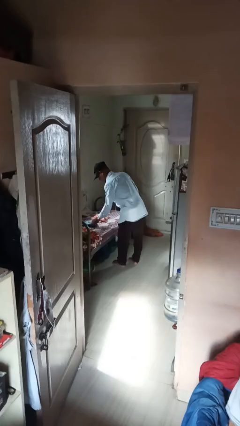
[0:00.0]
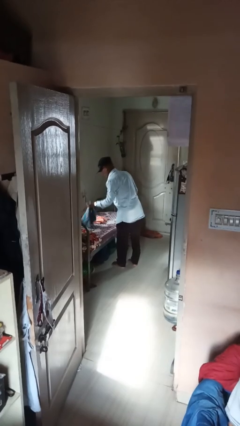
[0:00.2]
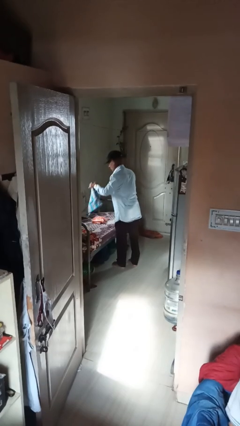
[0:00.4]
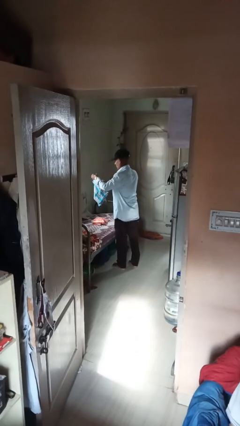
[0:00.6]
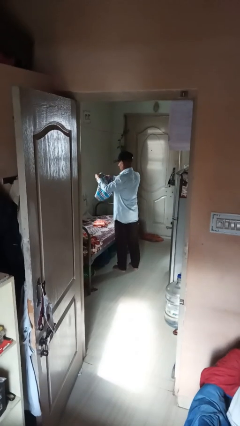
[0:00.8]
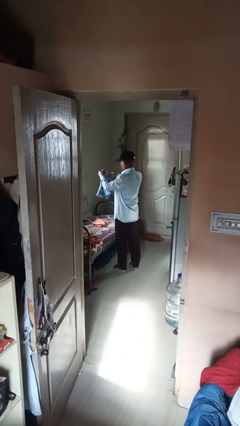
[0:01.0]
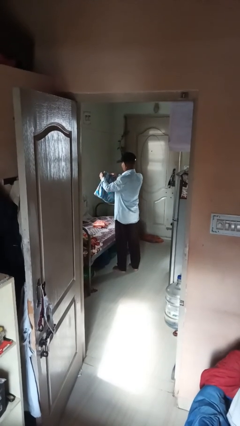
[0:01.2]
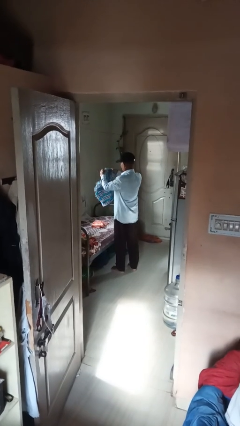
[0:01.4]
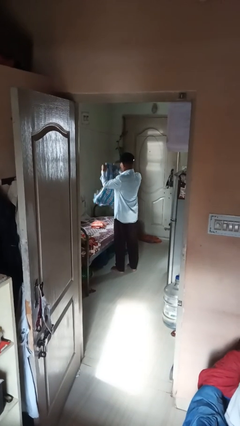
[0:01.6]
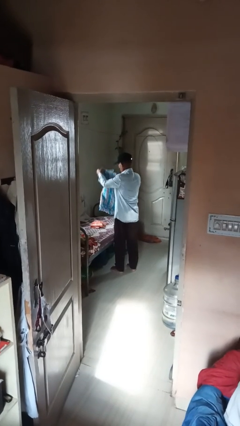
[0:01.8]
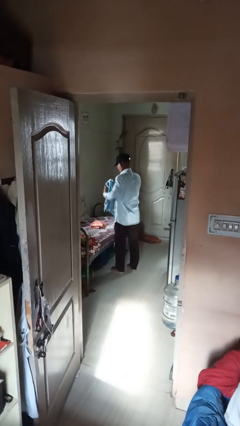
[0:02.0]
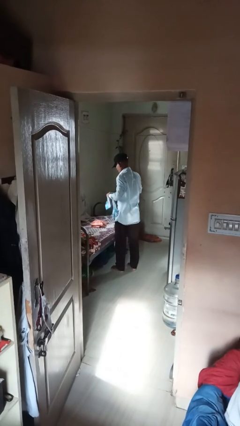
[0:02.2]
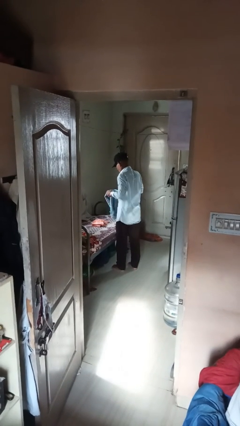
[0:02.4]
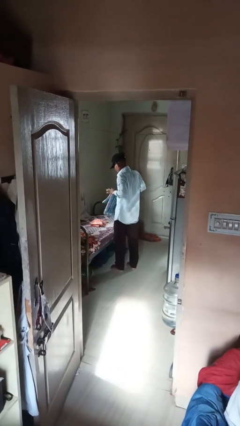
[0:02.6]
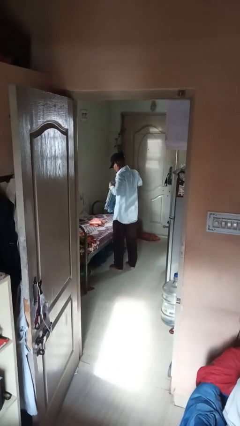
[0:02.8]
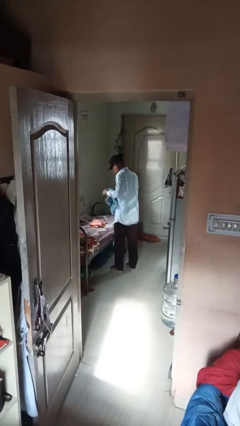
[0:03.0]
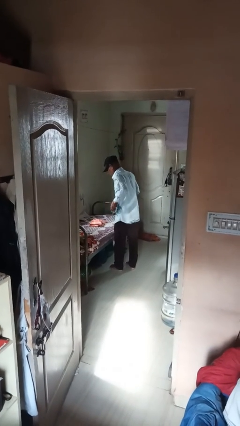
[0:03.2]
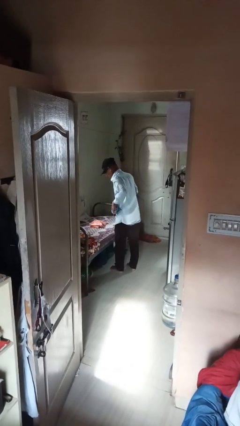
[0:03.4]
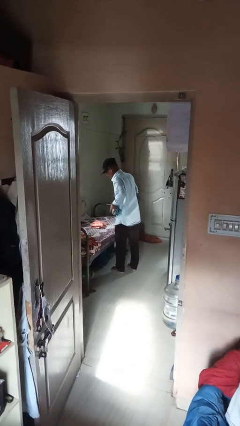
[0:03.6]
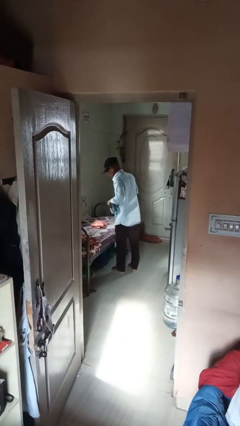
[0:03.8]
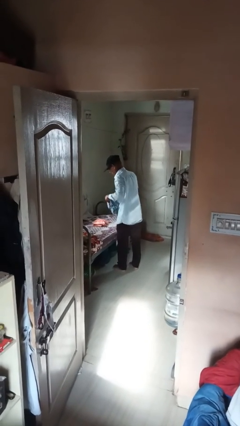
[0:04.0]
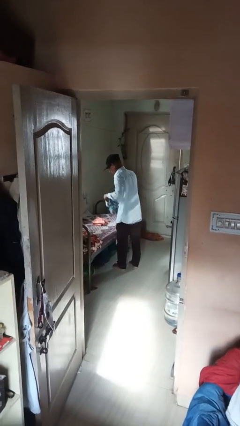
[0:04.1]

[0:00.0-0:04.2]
person folds towel

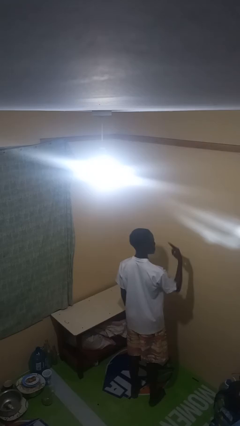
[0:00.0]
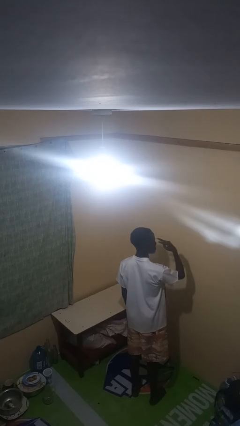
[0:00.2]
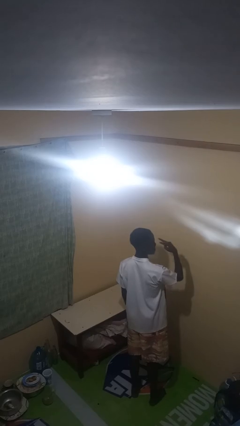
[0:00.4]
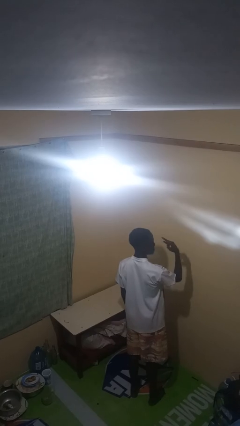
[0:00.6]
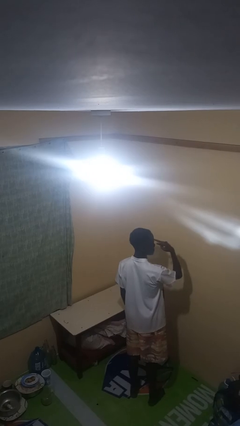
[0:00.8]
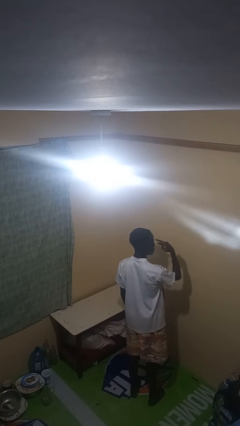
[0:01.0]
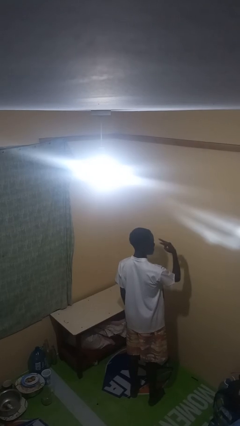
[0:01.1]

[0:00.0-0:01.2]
person gestures watch closely

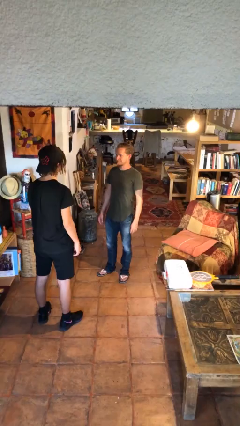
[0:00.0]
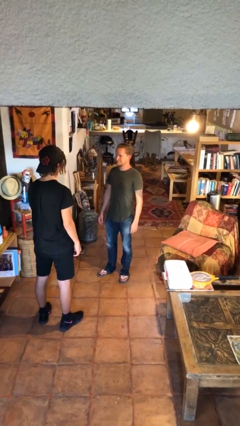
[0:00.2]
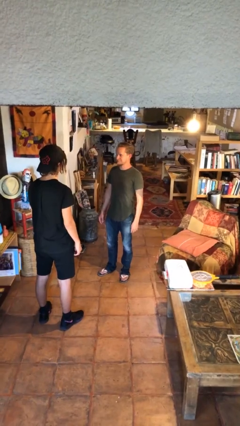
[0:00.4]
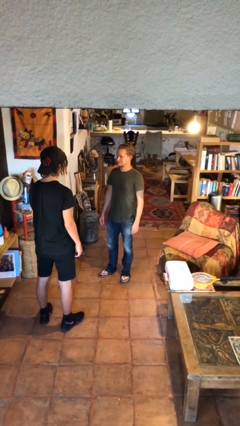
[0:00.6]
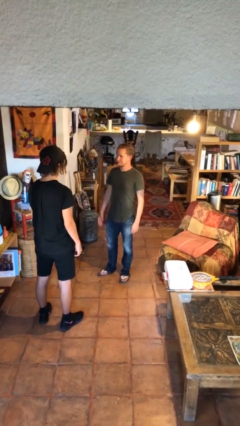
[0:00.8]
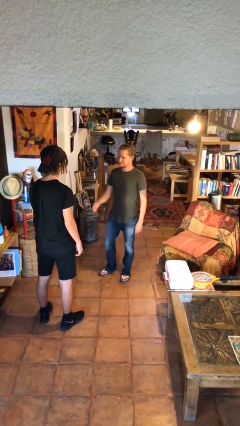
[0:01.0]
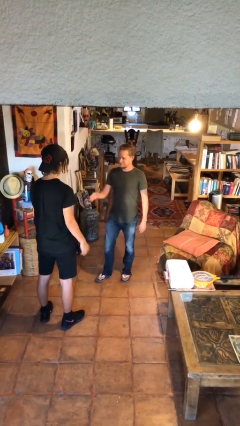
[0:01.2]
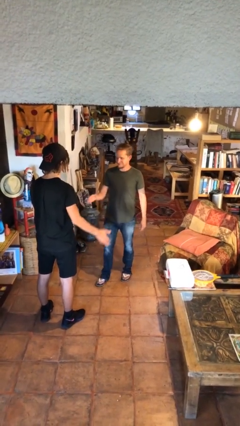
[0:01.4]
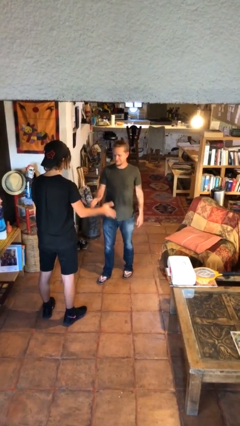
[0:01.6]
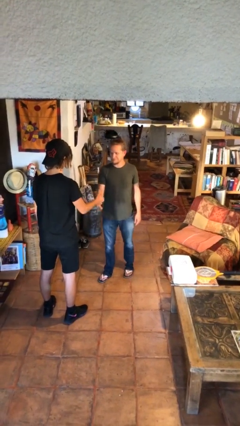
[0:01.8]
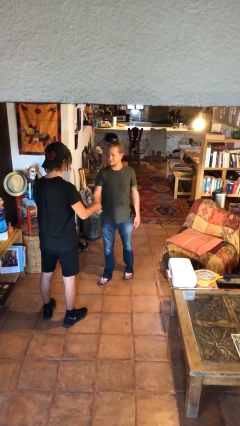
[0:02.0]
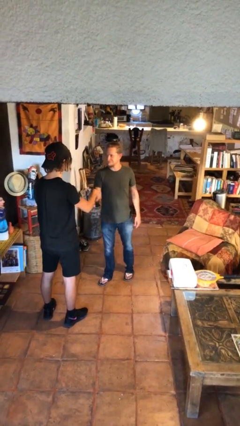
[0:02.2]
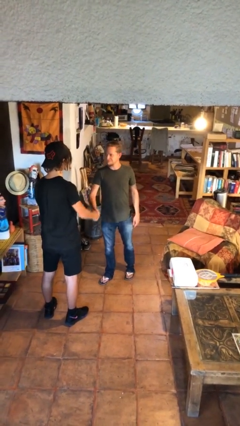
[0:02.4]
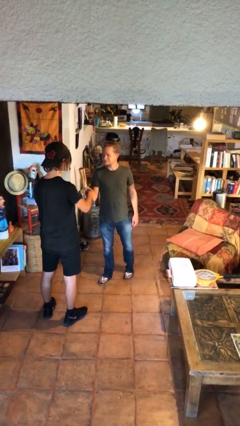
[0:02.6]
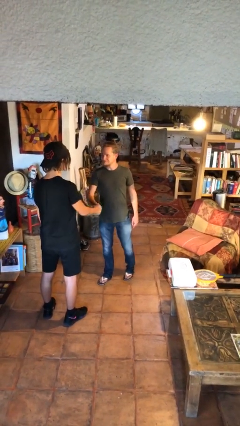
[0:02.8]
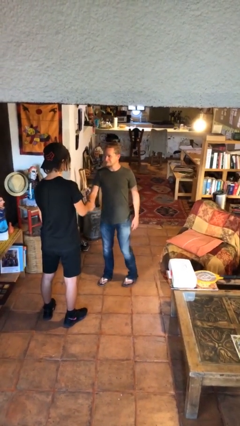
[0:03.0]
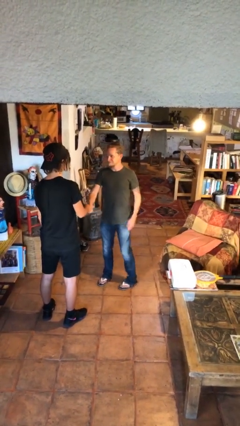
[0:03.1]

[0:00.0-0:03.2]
person shakes hand

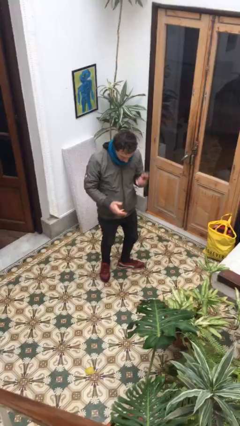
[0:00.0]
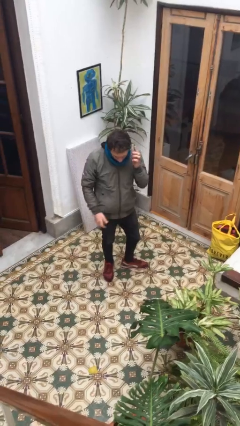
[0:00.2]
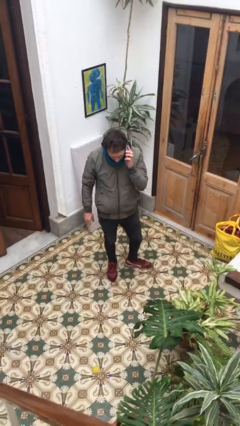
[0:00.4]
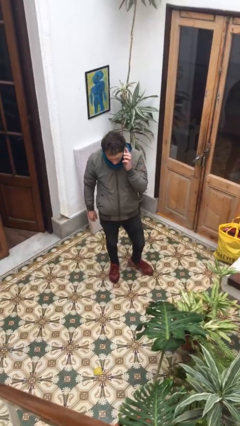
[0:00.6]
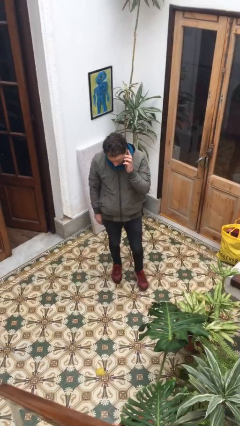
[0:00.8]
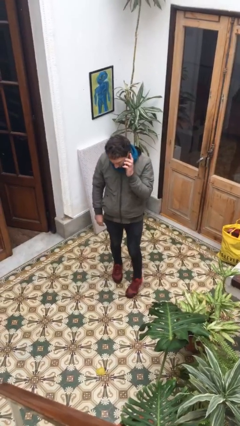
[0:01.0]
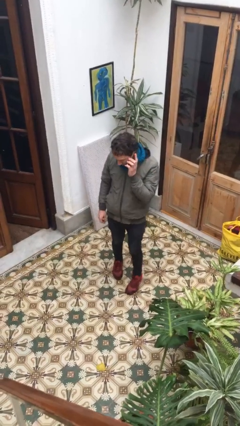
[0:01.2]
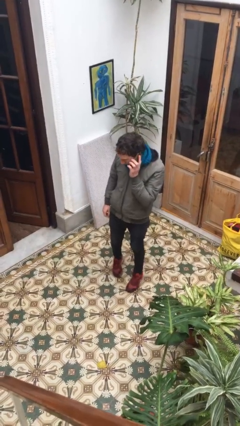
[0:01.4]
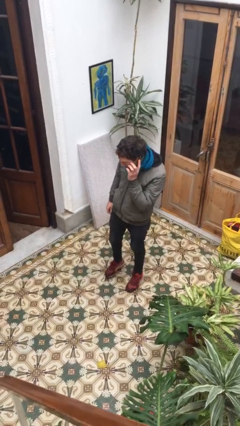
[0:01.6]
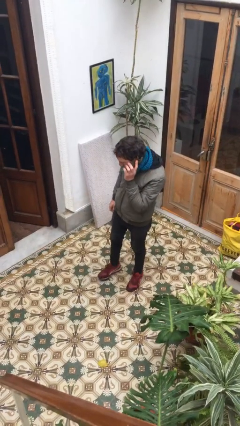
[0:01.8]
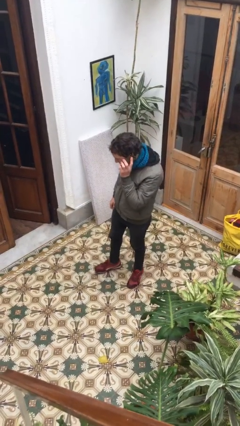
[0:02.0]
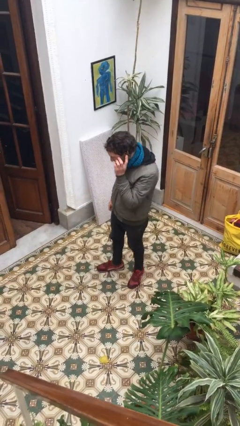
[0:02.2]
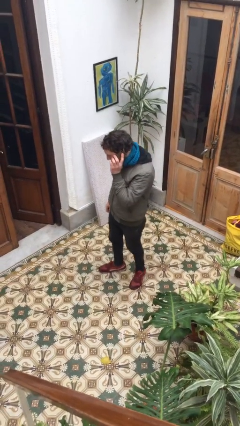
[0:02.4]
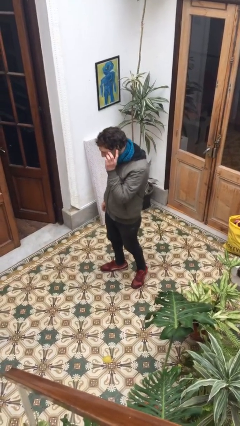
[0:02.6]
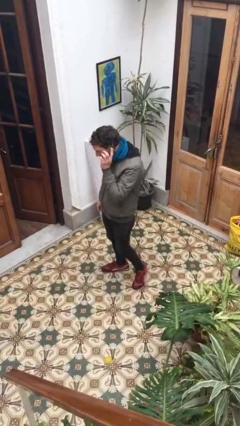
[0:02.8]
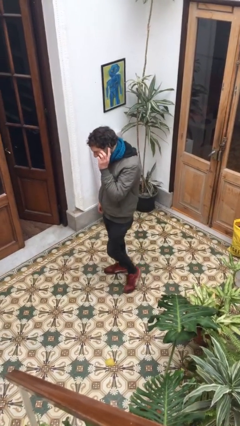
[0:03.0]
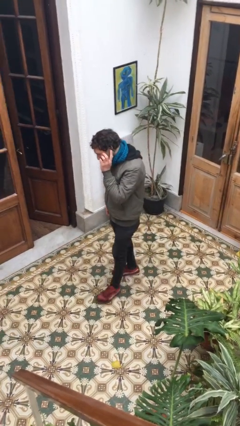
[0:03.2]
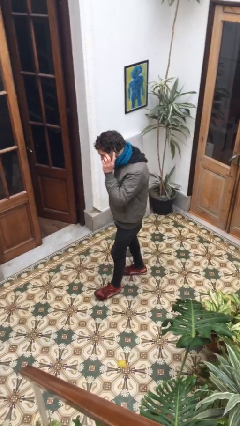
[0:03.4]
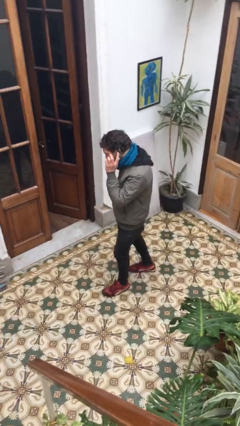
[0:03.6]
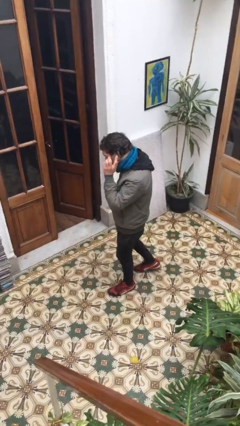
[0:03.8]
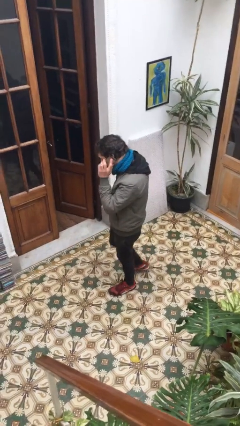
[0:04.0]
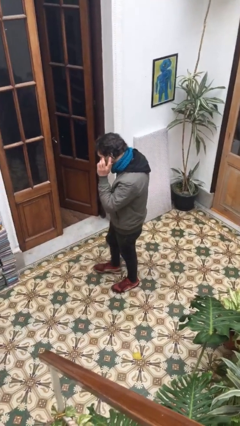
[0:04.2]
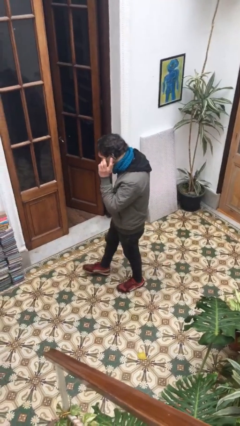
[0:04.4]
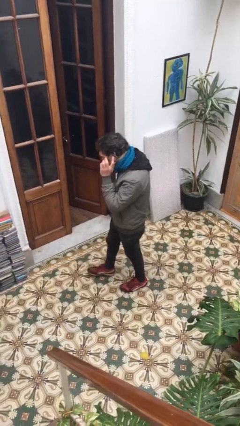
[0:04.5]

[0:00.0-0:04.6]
person talks on phone

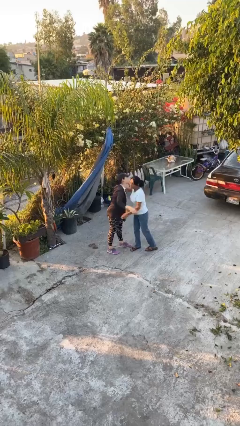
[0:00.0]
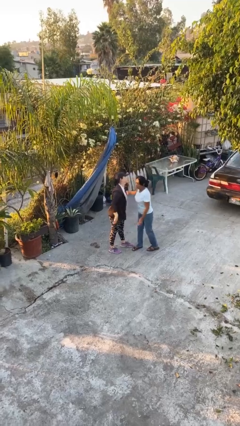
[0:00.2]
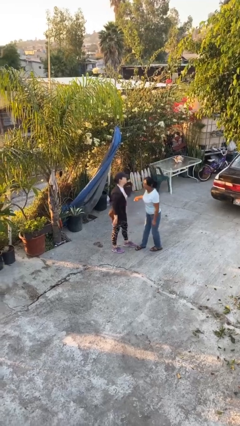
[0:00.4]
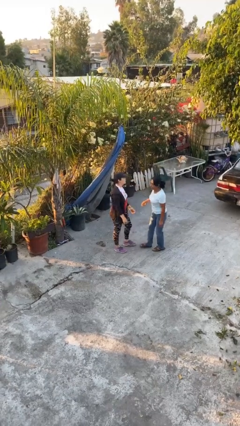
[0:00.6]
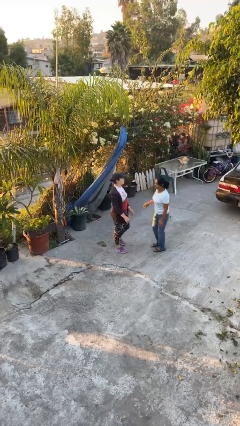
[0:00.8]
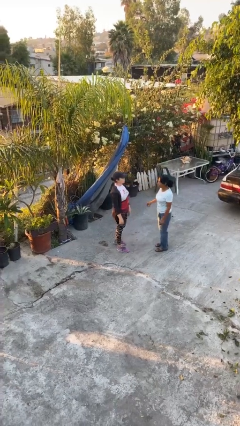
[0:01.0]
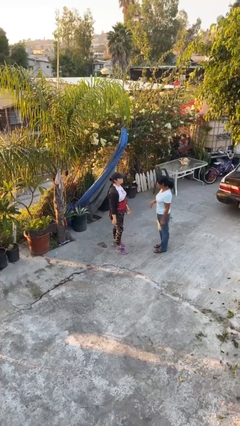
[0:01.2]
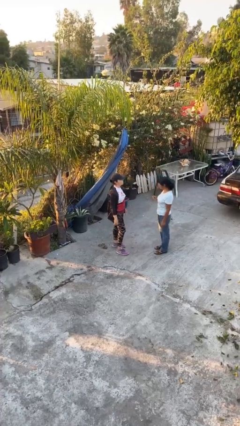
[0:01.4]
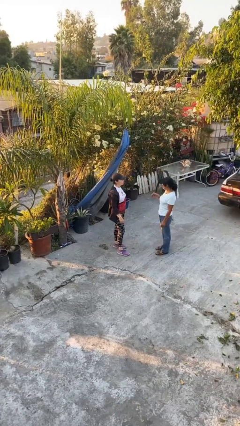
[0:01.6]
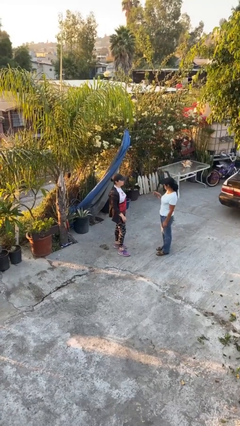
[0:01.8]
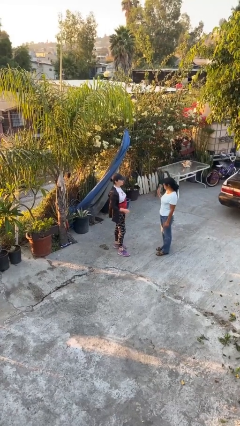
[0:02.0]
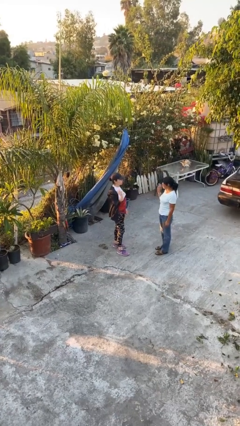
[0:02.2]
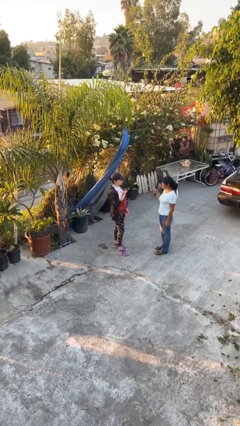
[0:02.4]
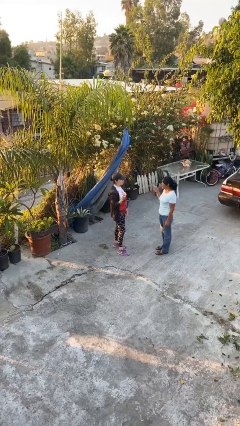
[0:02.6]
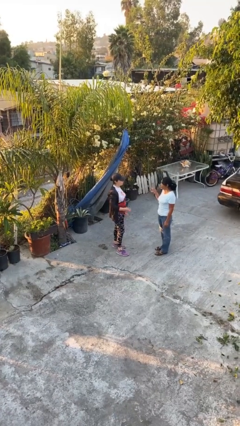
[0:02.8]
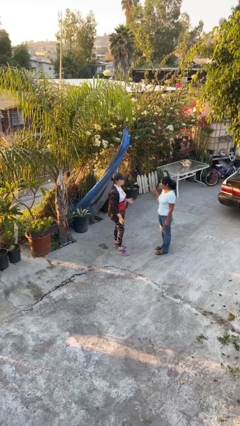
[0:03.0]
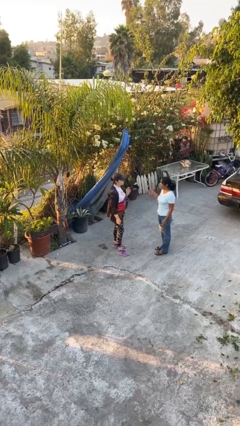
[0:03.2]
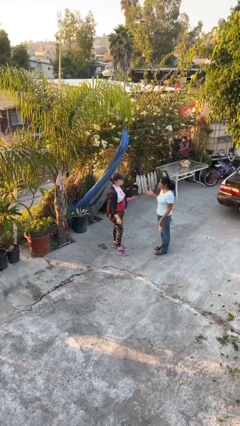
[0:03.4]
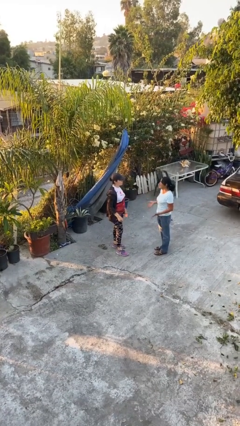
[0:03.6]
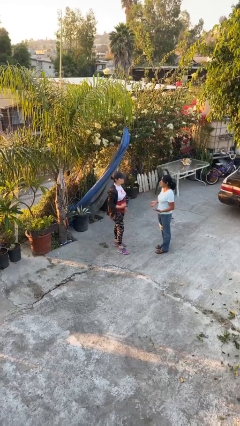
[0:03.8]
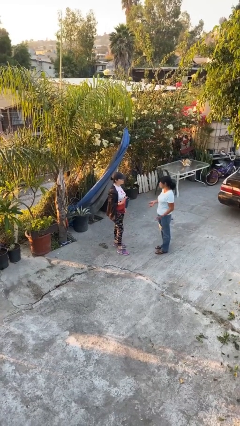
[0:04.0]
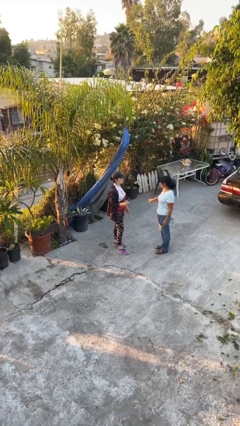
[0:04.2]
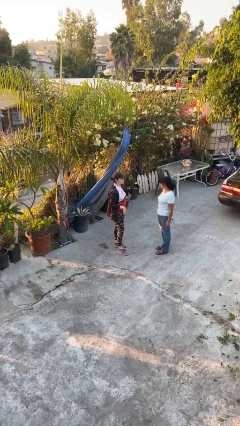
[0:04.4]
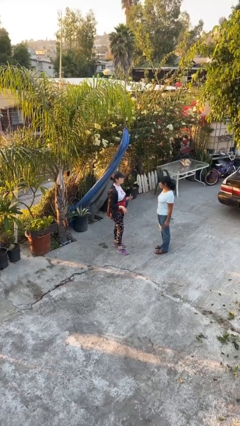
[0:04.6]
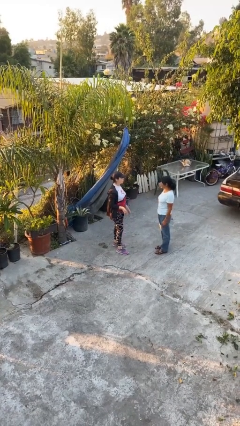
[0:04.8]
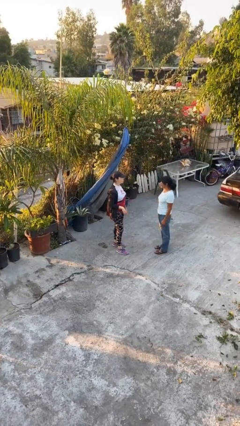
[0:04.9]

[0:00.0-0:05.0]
person talks to person
